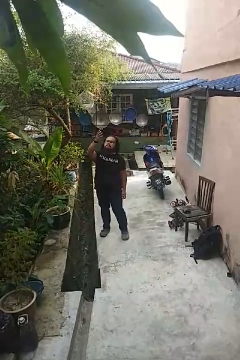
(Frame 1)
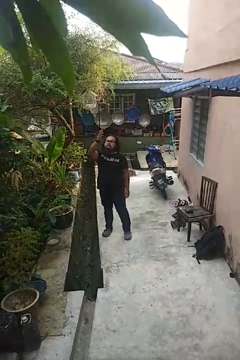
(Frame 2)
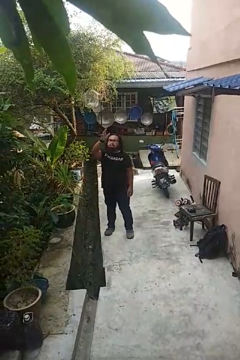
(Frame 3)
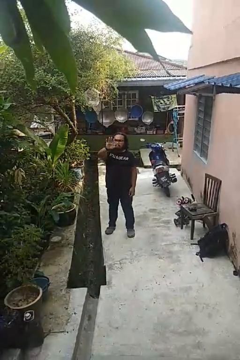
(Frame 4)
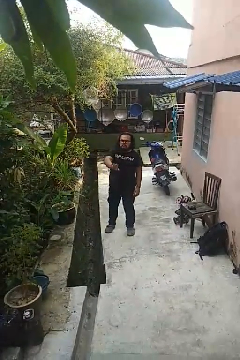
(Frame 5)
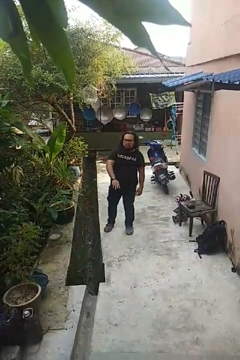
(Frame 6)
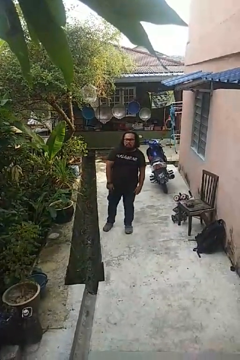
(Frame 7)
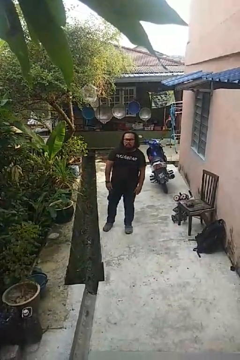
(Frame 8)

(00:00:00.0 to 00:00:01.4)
person gestures swipe down

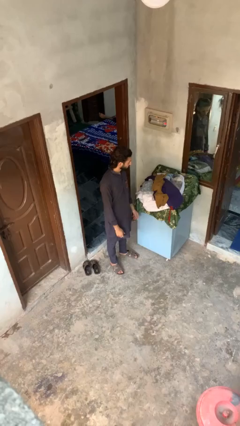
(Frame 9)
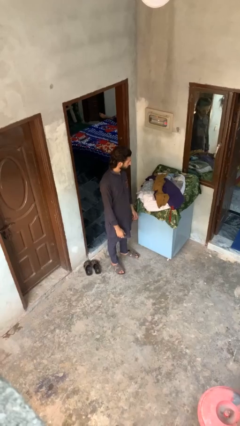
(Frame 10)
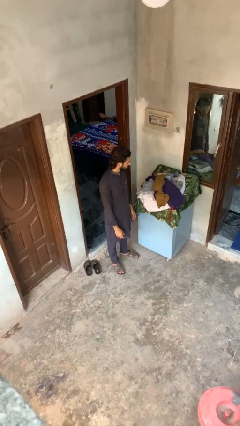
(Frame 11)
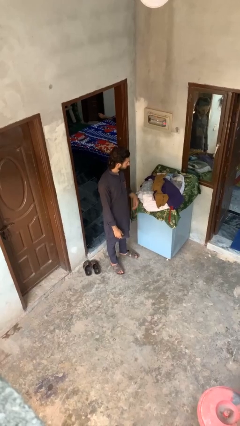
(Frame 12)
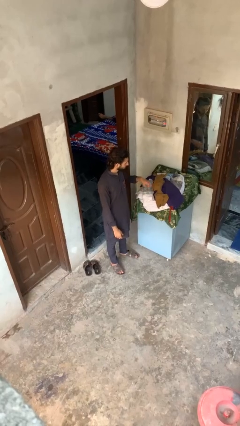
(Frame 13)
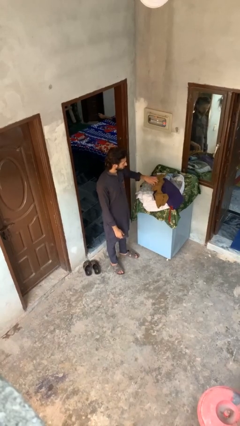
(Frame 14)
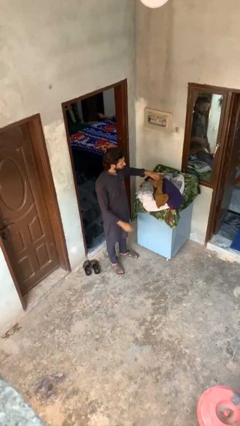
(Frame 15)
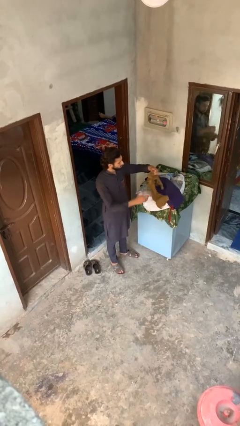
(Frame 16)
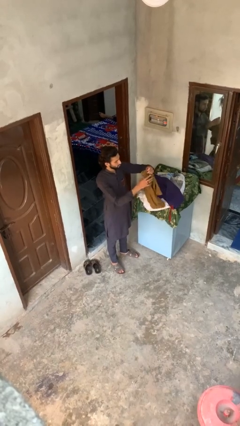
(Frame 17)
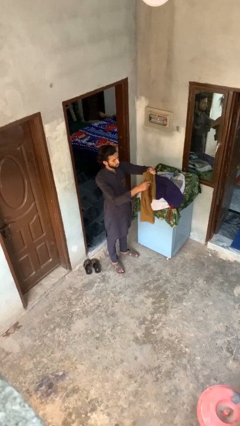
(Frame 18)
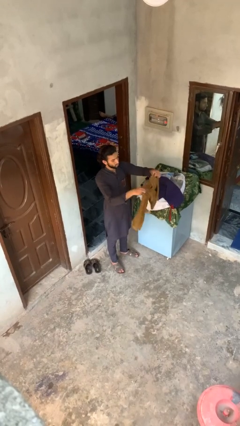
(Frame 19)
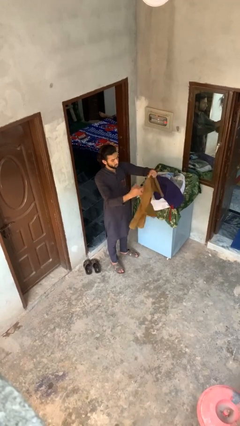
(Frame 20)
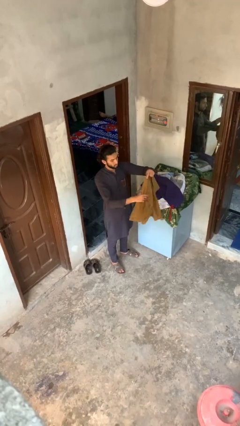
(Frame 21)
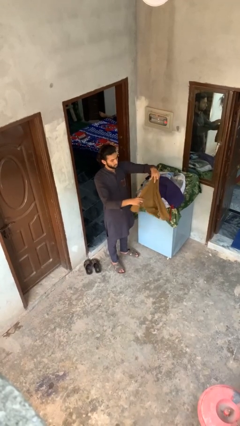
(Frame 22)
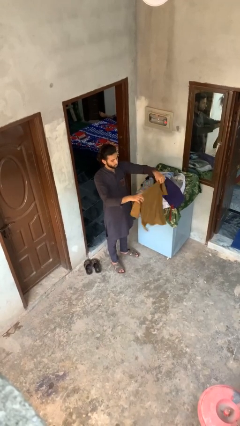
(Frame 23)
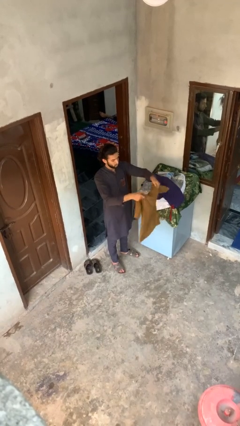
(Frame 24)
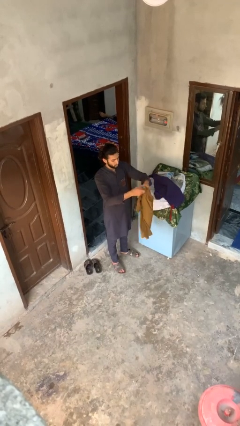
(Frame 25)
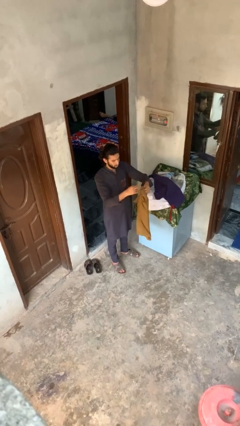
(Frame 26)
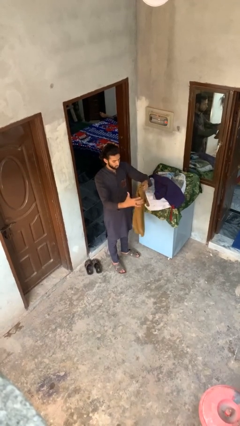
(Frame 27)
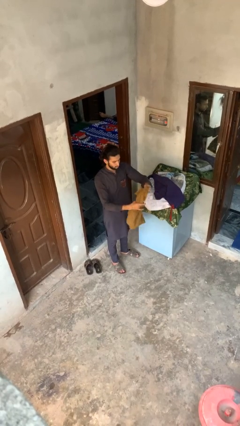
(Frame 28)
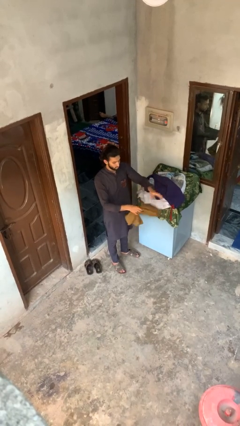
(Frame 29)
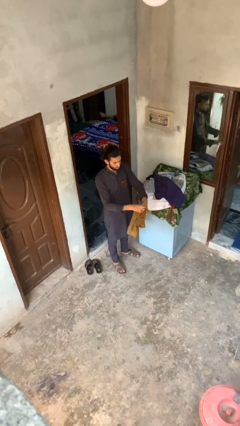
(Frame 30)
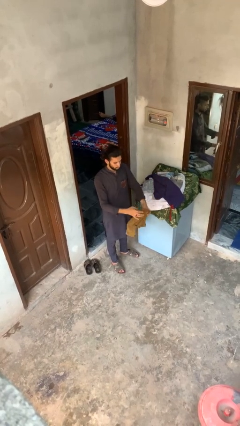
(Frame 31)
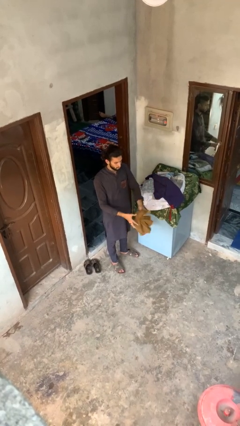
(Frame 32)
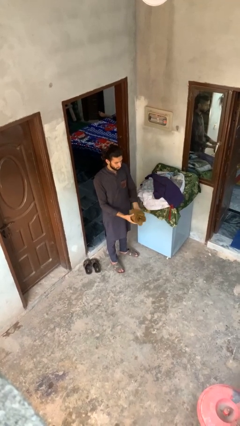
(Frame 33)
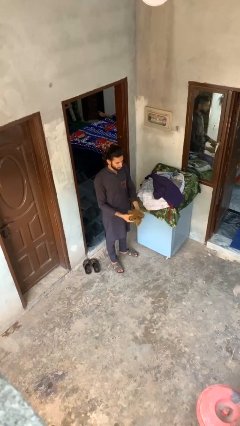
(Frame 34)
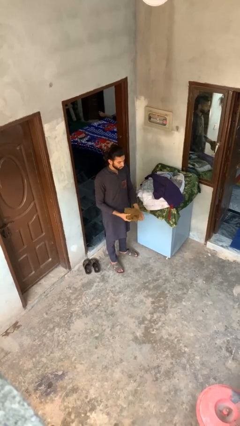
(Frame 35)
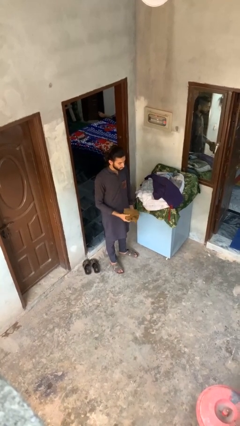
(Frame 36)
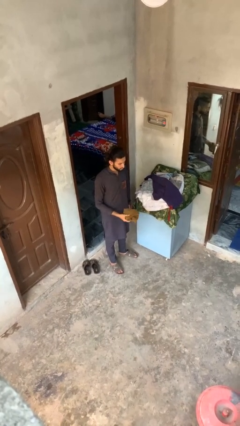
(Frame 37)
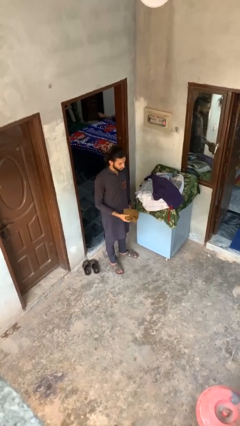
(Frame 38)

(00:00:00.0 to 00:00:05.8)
person folds shirt

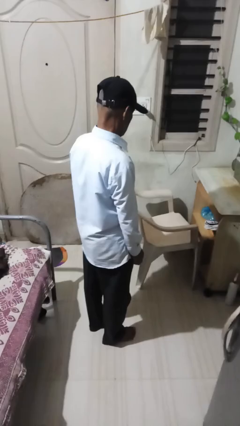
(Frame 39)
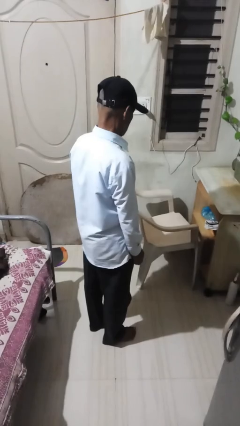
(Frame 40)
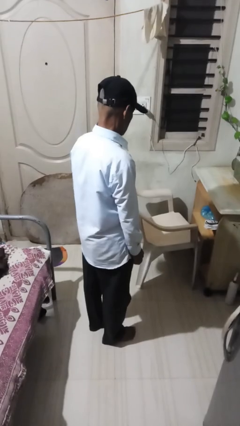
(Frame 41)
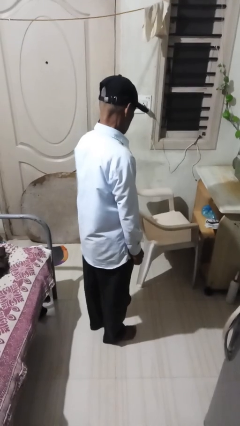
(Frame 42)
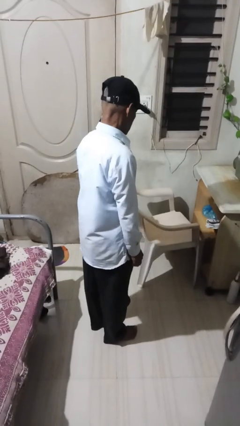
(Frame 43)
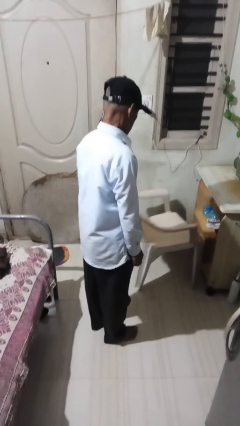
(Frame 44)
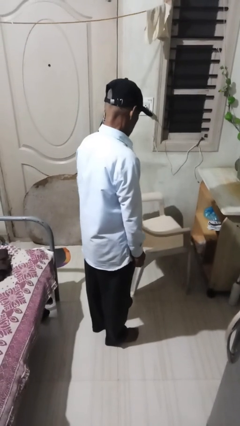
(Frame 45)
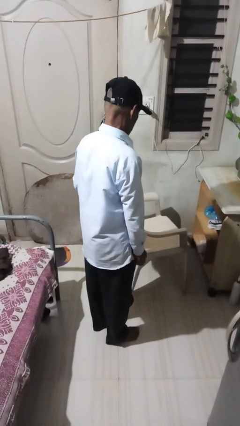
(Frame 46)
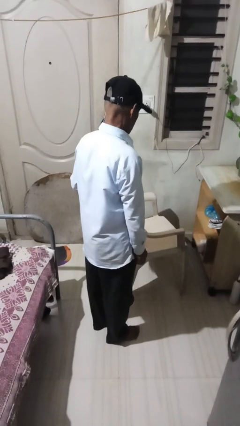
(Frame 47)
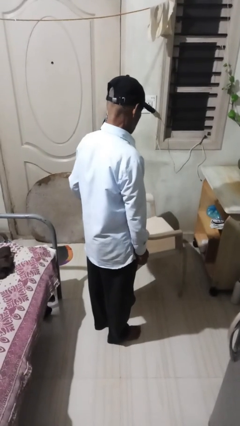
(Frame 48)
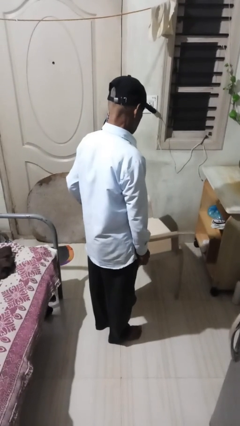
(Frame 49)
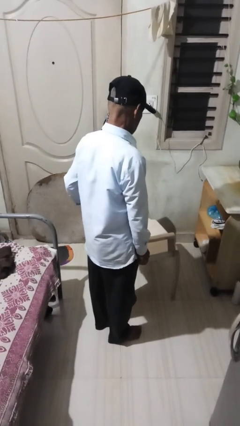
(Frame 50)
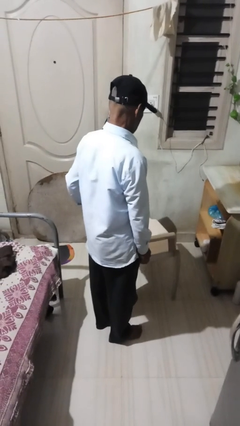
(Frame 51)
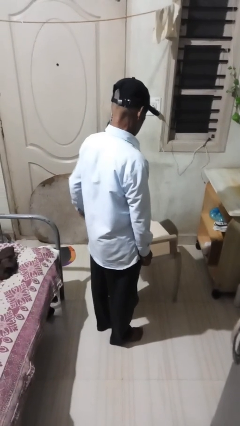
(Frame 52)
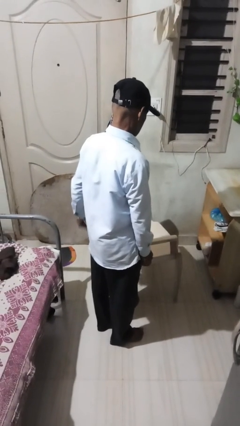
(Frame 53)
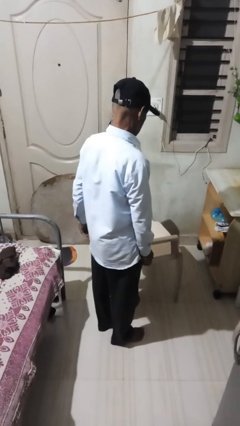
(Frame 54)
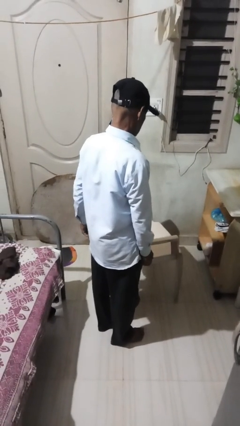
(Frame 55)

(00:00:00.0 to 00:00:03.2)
person pulls out chair

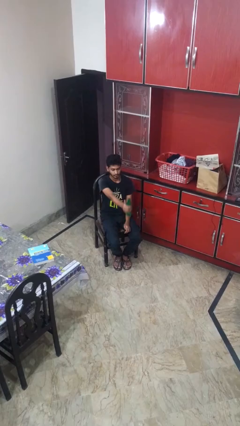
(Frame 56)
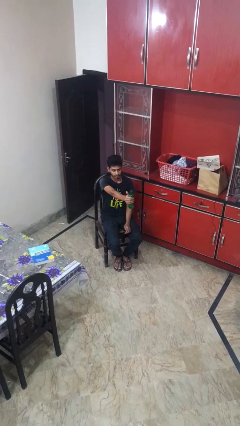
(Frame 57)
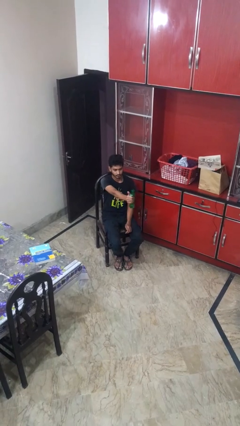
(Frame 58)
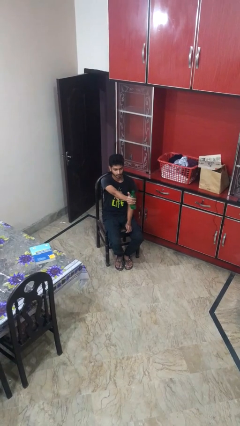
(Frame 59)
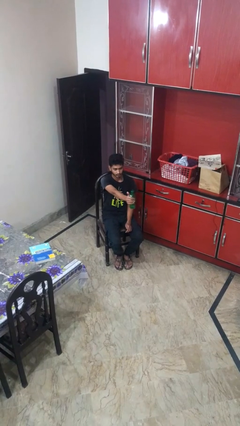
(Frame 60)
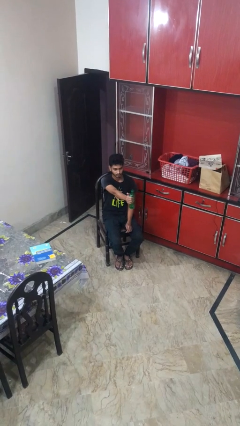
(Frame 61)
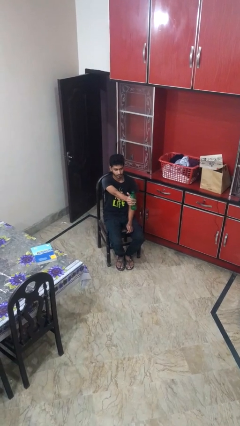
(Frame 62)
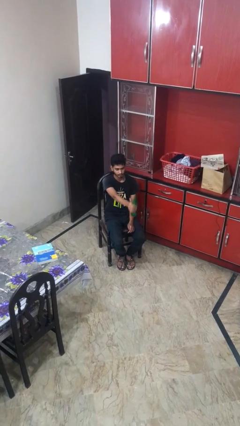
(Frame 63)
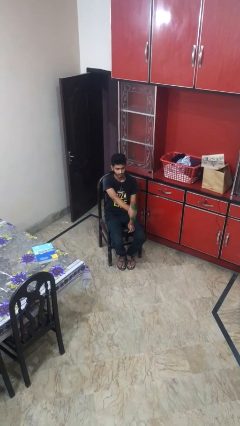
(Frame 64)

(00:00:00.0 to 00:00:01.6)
person squeezes object

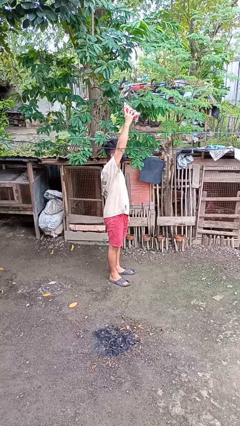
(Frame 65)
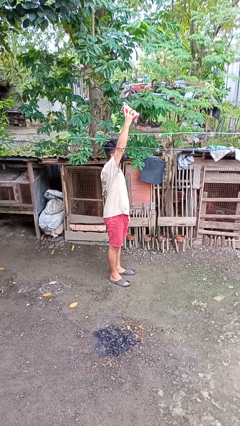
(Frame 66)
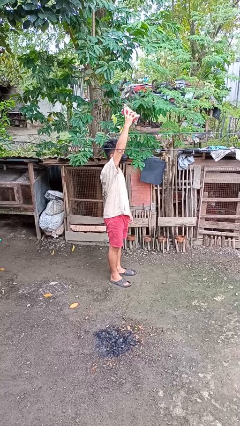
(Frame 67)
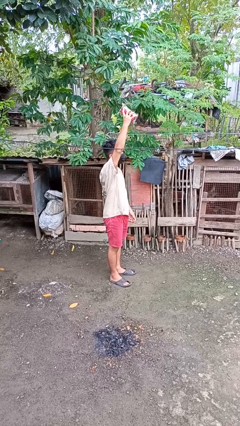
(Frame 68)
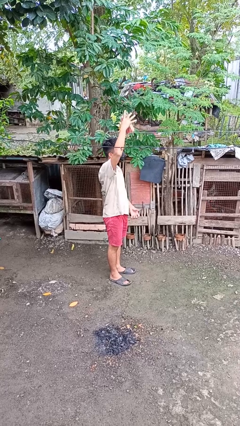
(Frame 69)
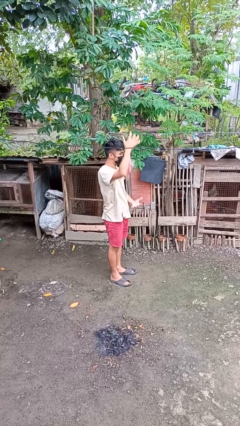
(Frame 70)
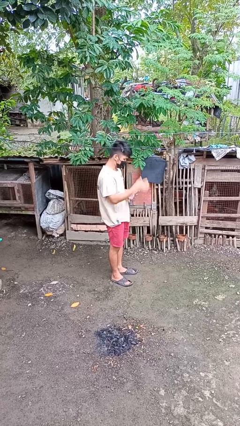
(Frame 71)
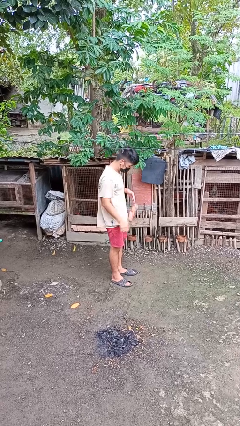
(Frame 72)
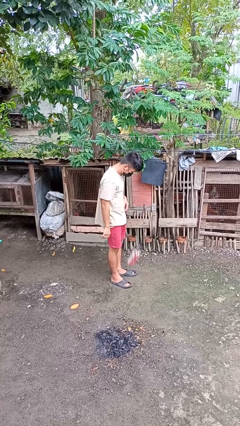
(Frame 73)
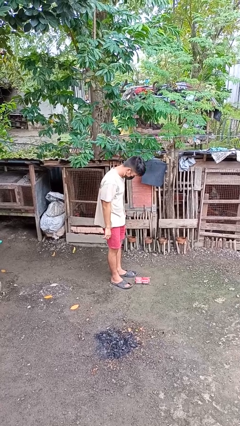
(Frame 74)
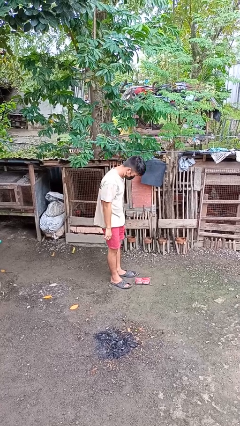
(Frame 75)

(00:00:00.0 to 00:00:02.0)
person drops object

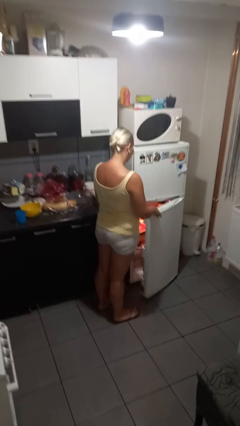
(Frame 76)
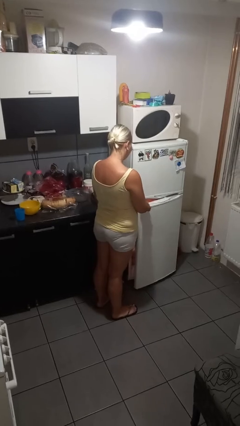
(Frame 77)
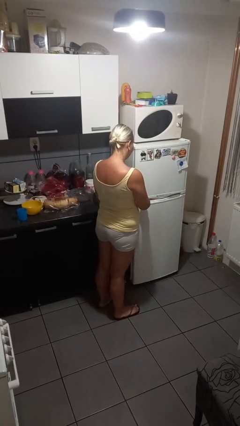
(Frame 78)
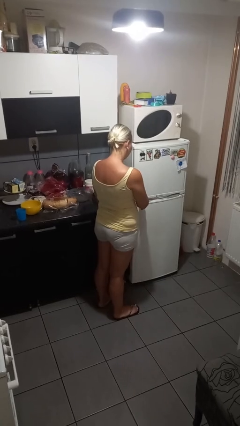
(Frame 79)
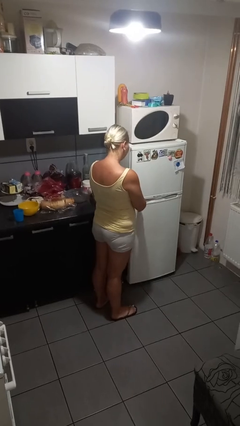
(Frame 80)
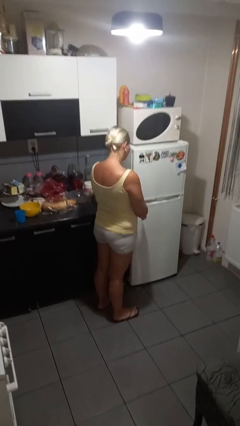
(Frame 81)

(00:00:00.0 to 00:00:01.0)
person closes refrigerator

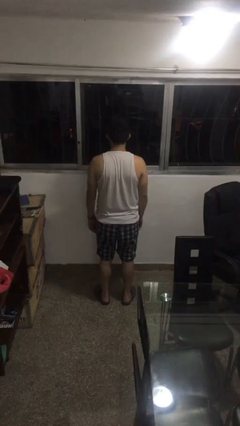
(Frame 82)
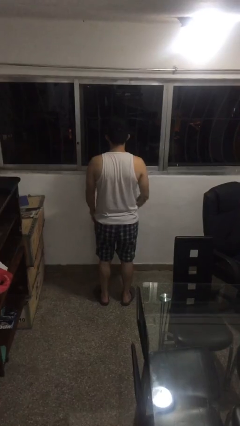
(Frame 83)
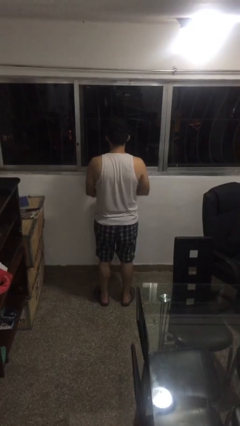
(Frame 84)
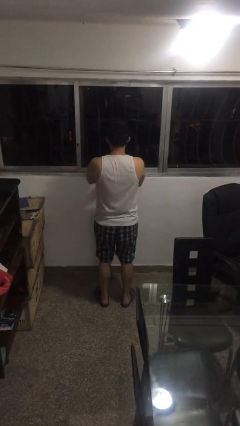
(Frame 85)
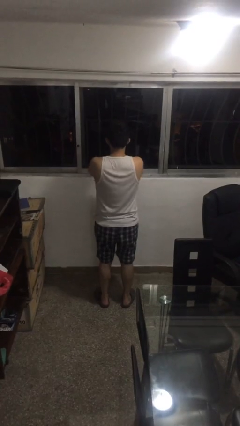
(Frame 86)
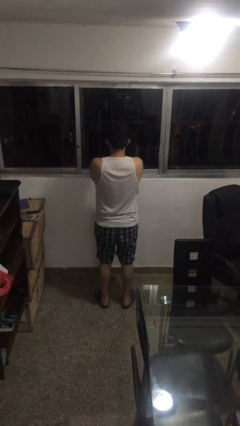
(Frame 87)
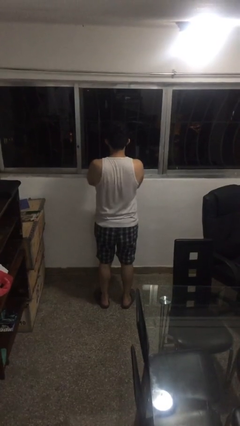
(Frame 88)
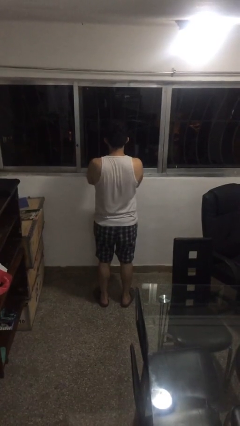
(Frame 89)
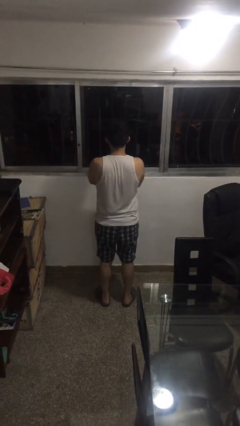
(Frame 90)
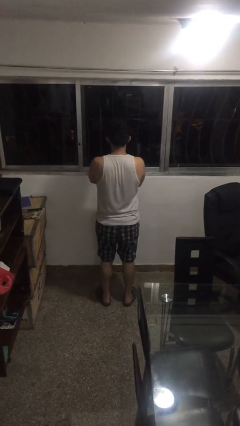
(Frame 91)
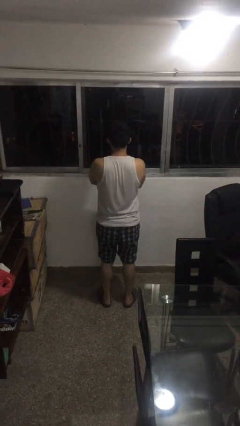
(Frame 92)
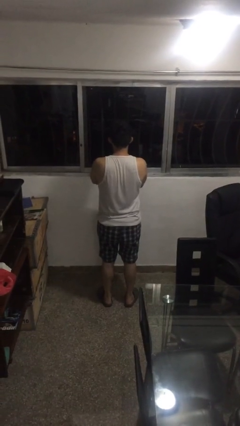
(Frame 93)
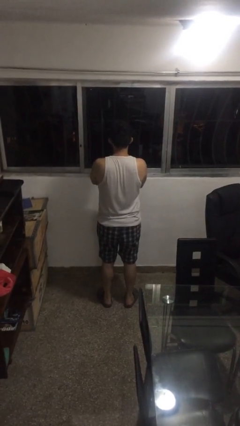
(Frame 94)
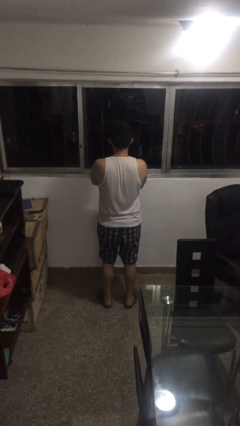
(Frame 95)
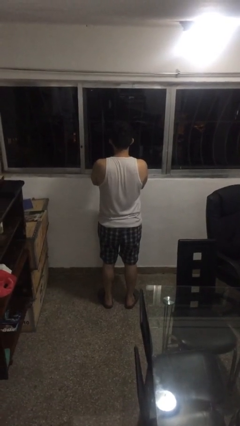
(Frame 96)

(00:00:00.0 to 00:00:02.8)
person crosses arms
